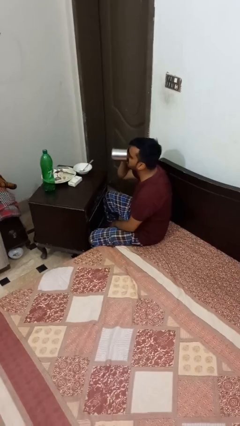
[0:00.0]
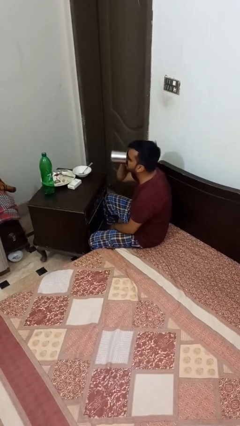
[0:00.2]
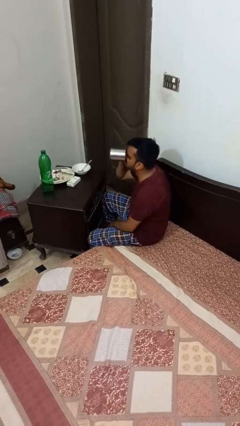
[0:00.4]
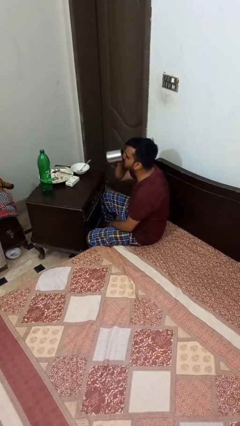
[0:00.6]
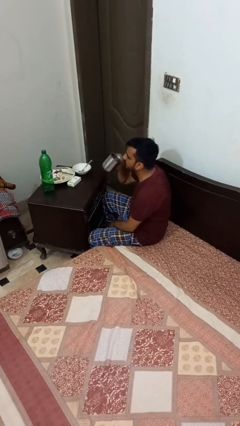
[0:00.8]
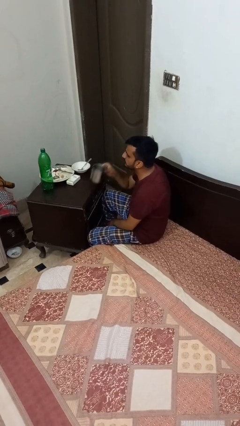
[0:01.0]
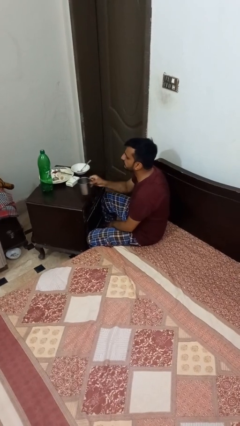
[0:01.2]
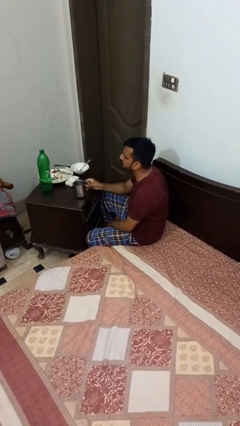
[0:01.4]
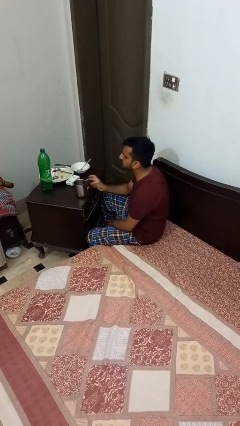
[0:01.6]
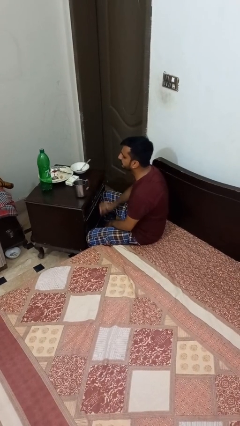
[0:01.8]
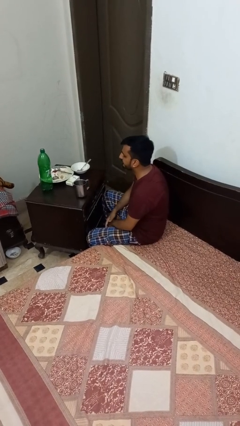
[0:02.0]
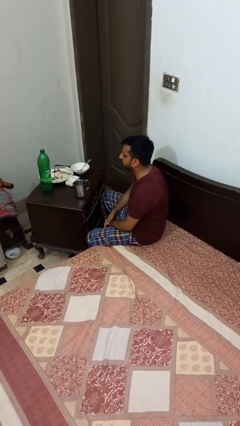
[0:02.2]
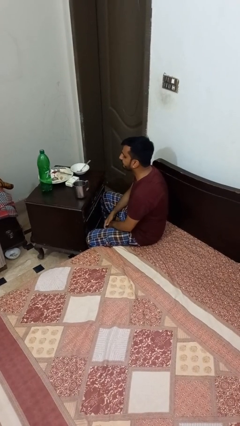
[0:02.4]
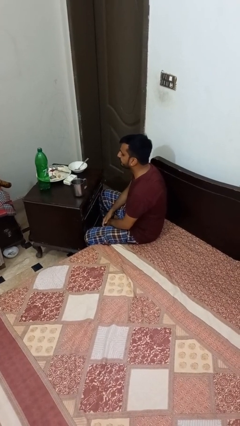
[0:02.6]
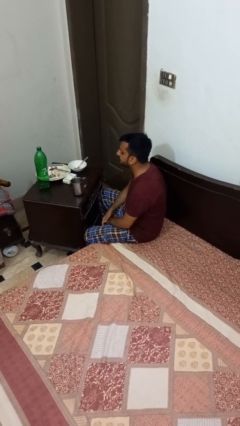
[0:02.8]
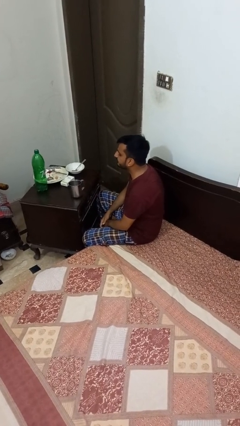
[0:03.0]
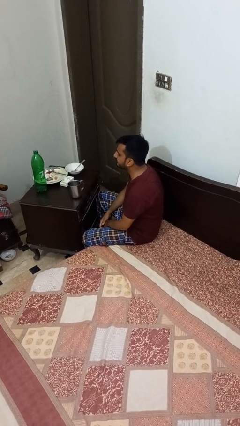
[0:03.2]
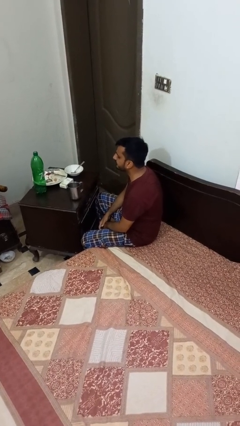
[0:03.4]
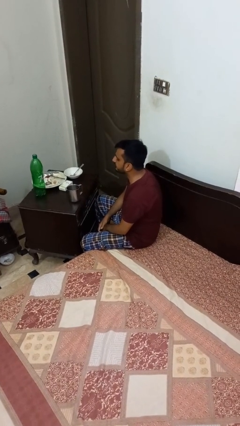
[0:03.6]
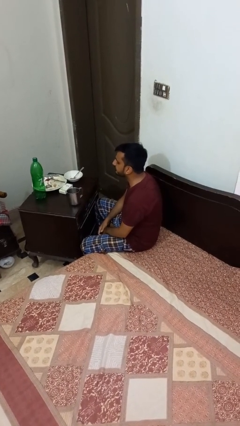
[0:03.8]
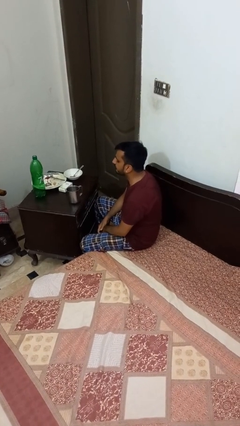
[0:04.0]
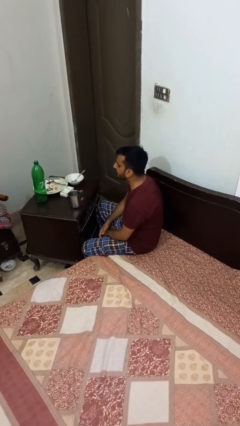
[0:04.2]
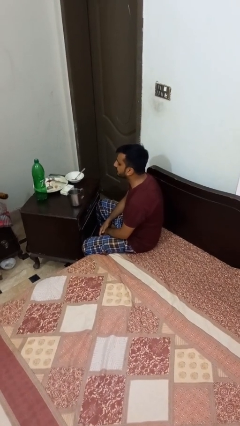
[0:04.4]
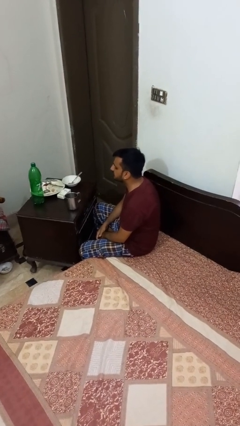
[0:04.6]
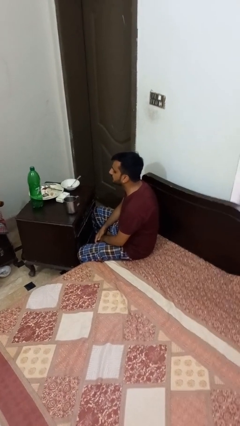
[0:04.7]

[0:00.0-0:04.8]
person puts down object on table

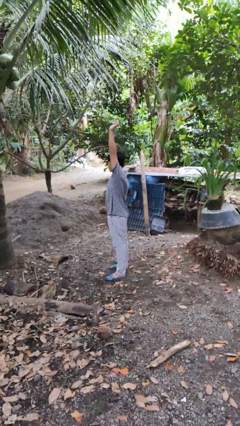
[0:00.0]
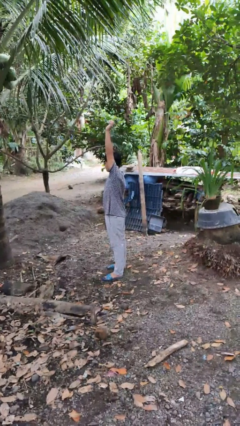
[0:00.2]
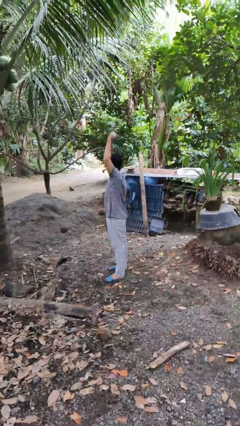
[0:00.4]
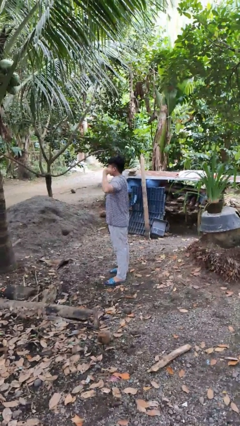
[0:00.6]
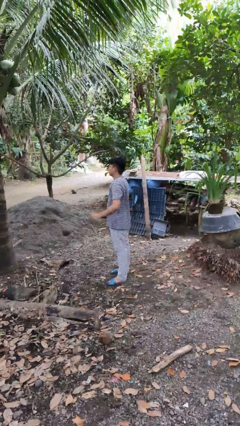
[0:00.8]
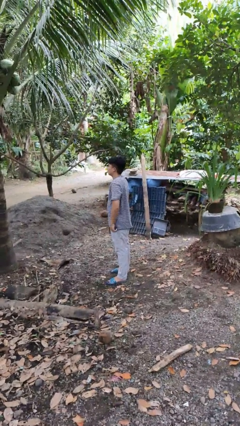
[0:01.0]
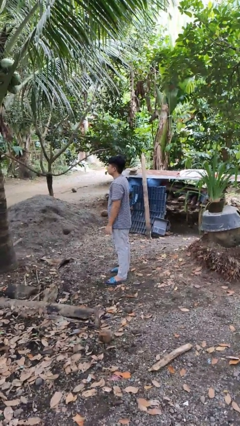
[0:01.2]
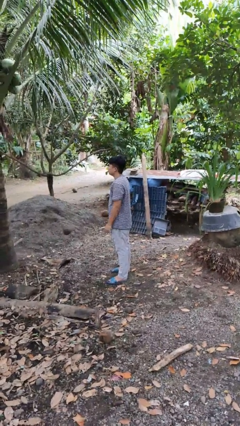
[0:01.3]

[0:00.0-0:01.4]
person gestures lower hand

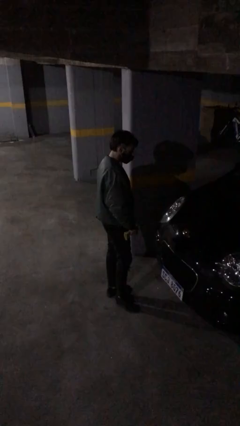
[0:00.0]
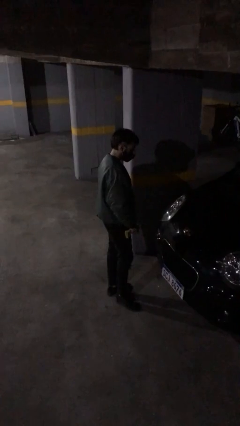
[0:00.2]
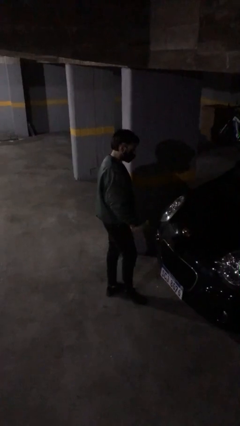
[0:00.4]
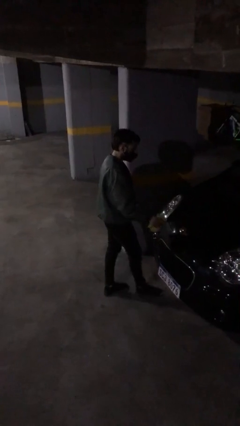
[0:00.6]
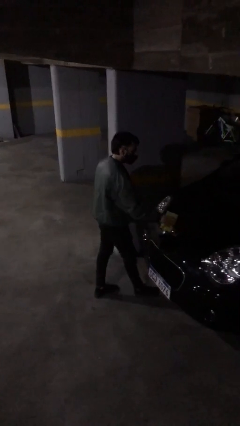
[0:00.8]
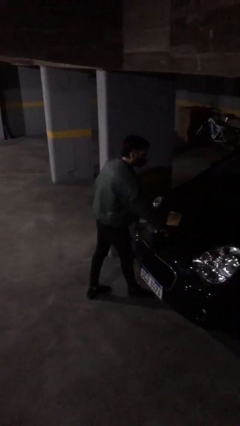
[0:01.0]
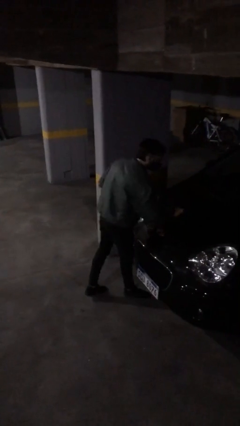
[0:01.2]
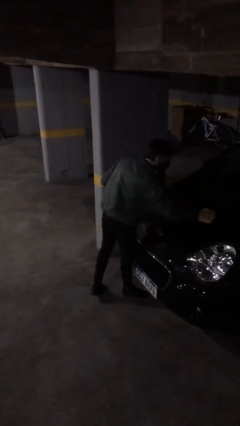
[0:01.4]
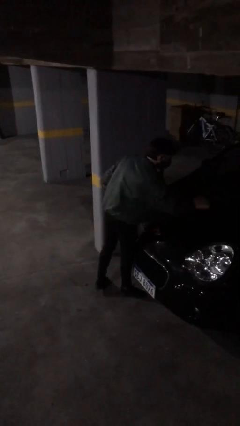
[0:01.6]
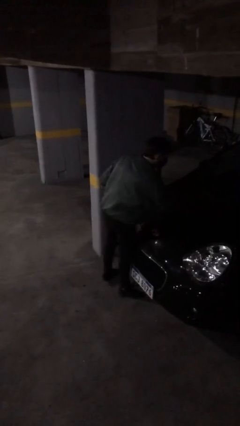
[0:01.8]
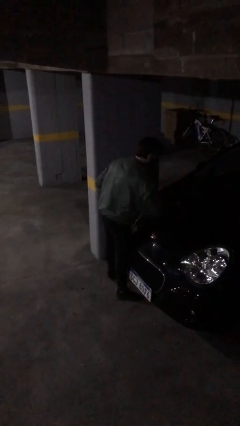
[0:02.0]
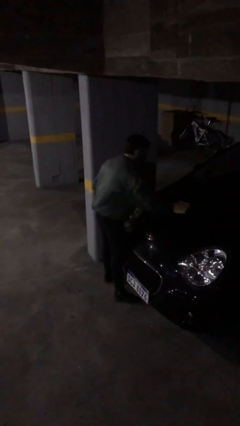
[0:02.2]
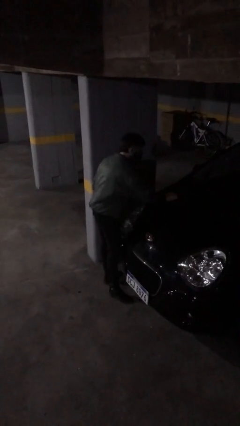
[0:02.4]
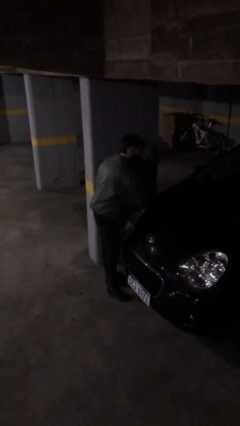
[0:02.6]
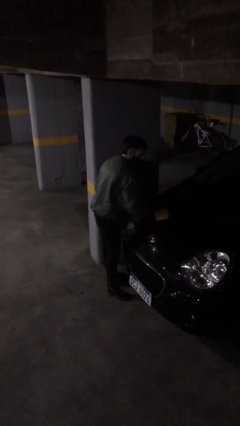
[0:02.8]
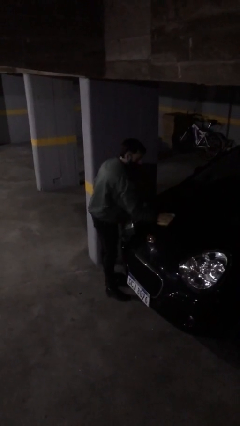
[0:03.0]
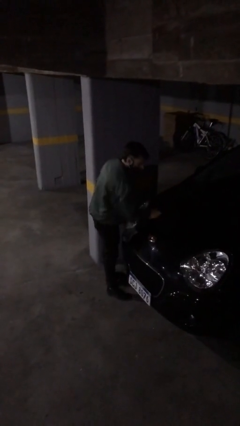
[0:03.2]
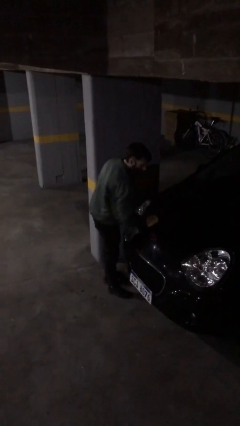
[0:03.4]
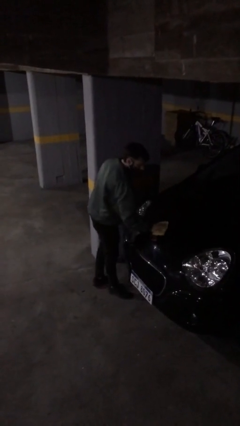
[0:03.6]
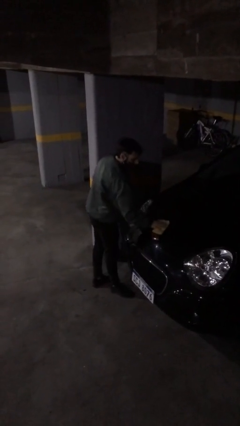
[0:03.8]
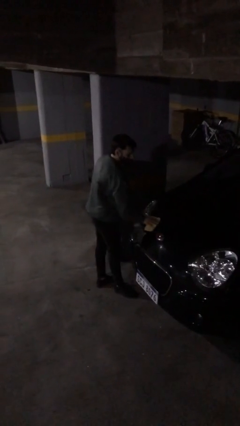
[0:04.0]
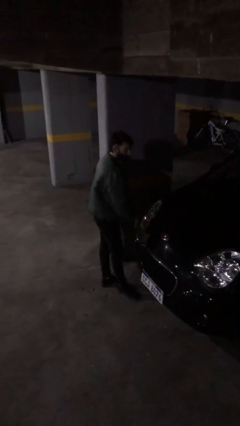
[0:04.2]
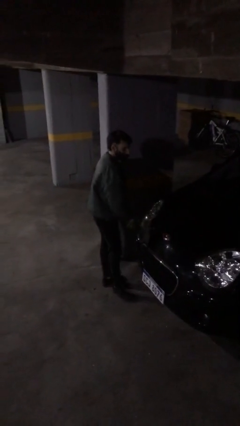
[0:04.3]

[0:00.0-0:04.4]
person polishes car with rag

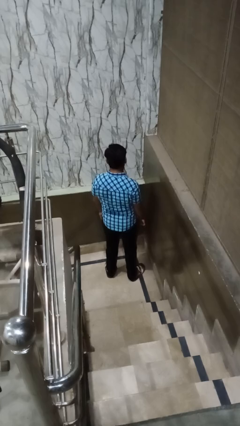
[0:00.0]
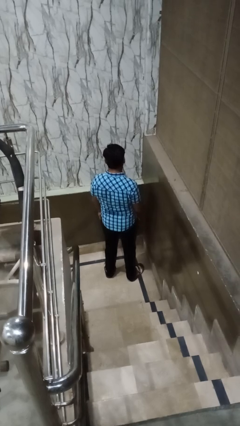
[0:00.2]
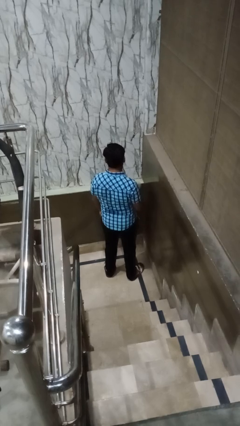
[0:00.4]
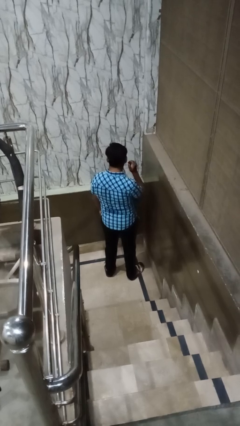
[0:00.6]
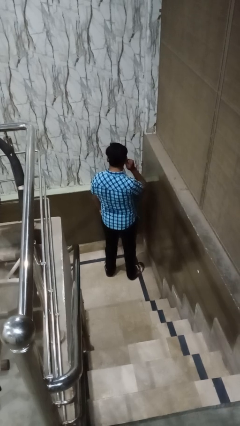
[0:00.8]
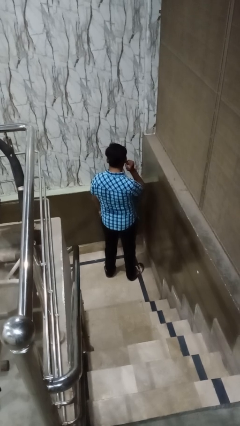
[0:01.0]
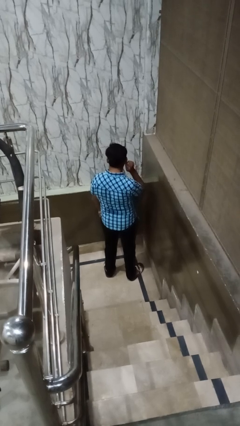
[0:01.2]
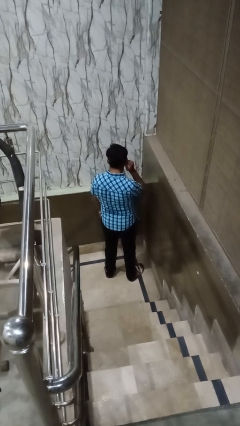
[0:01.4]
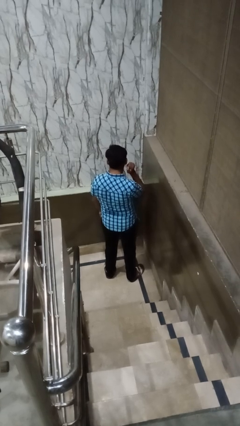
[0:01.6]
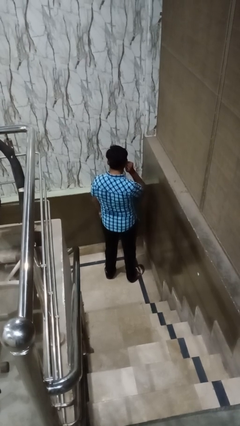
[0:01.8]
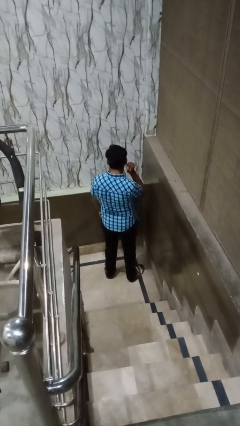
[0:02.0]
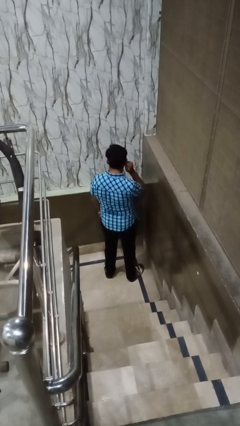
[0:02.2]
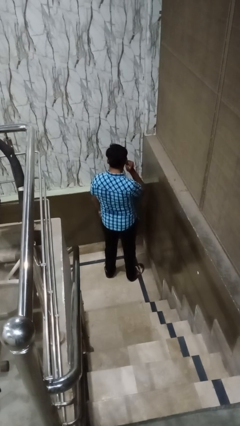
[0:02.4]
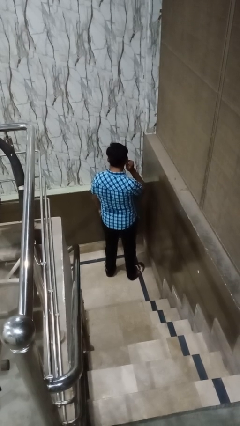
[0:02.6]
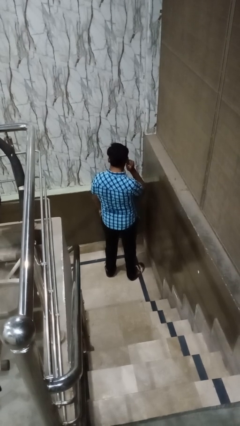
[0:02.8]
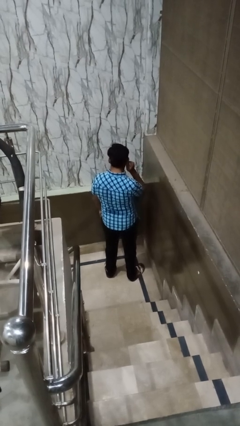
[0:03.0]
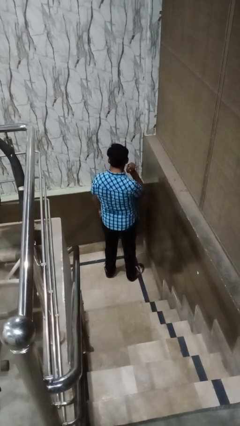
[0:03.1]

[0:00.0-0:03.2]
person touches earlobe

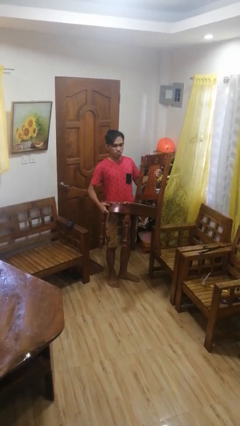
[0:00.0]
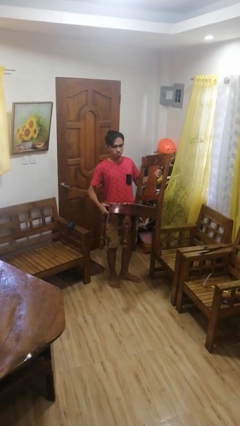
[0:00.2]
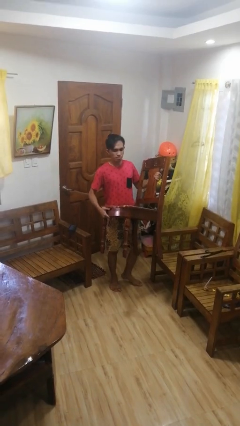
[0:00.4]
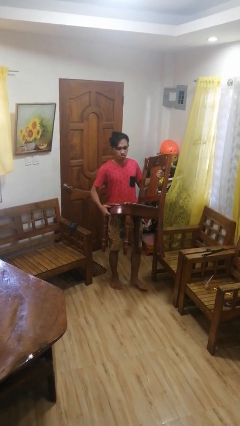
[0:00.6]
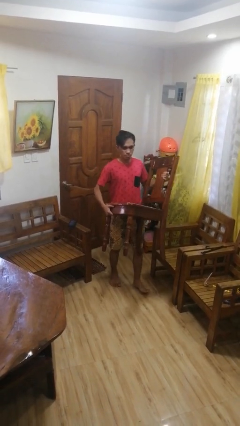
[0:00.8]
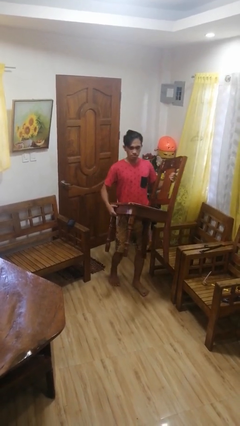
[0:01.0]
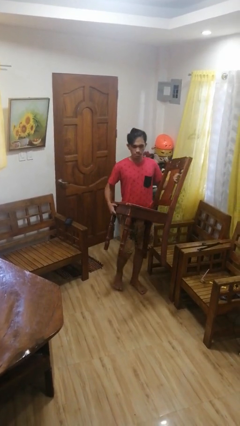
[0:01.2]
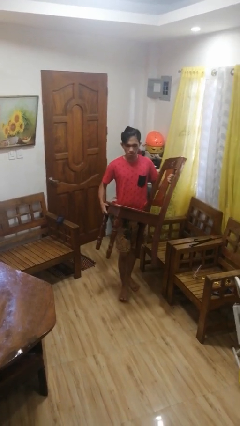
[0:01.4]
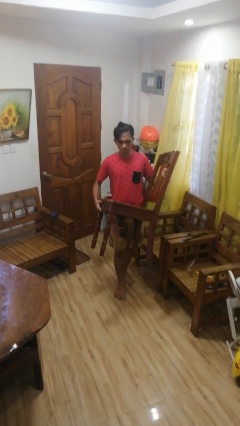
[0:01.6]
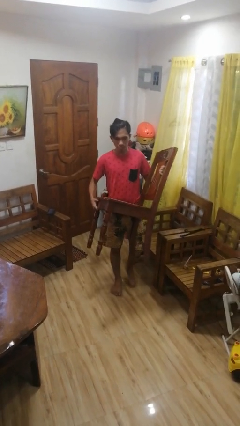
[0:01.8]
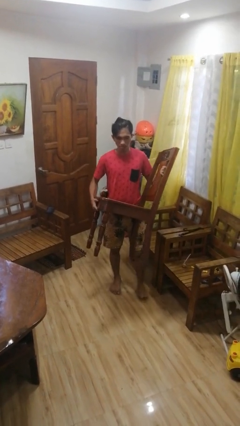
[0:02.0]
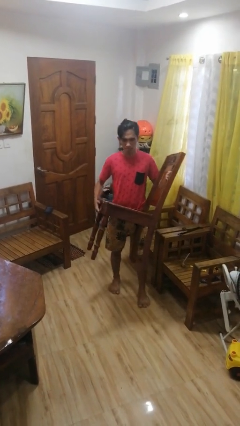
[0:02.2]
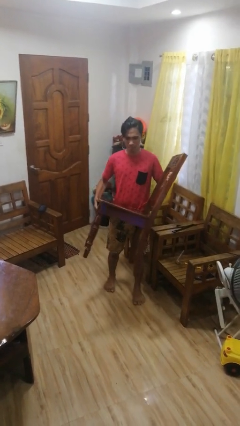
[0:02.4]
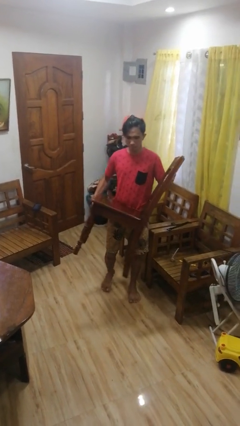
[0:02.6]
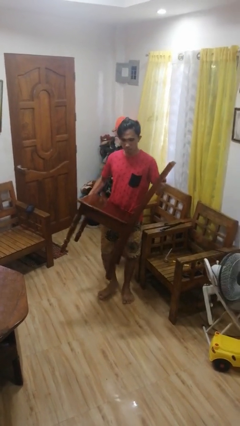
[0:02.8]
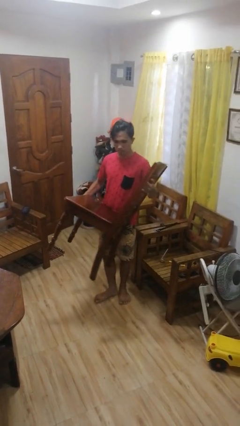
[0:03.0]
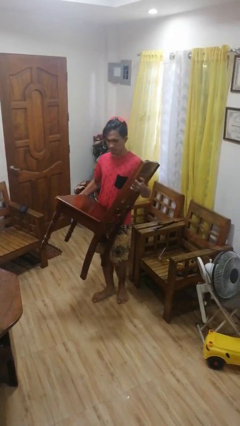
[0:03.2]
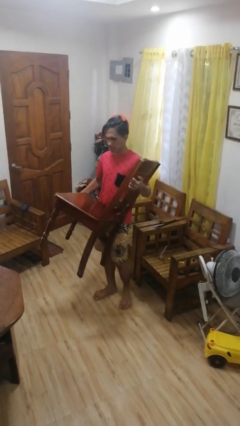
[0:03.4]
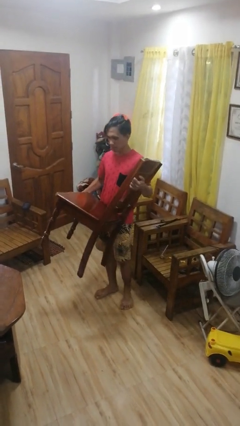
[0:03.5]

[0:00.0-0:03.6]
person carries furniture

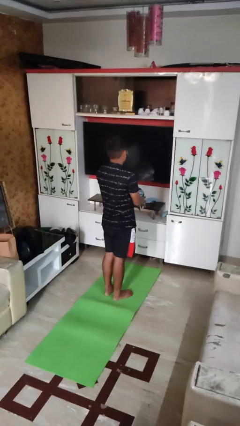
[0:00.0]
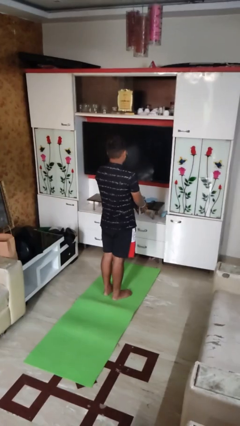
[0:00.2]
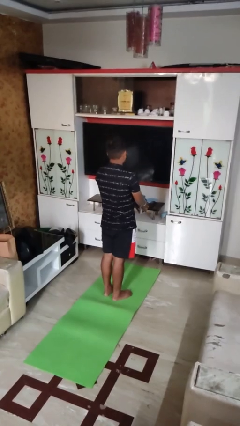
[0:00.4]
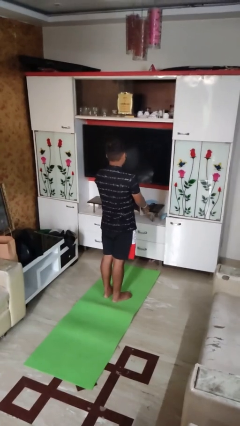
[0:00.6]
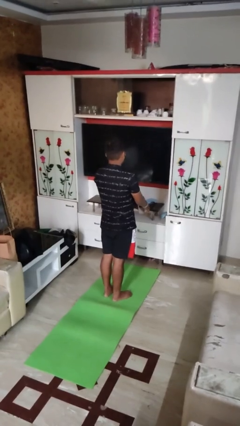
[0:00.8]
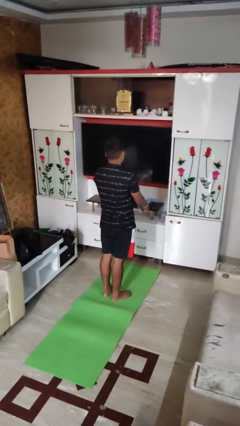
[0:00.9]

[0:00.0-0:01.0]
person catches dropped object
